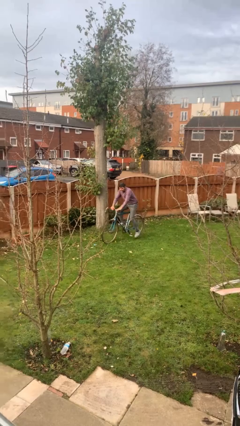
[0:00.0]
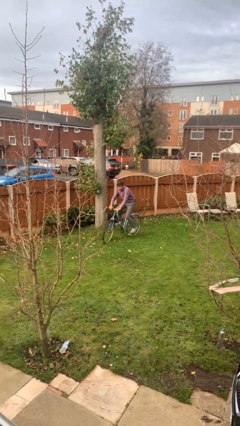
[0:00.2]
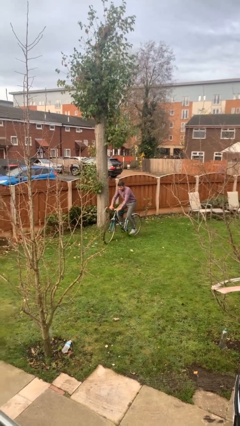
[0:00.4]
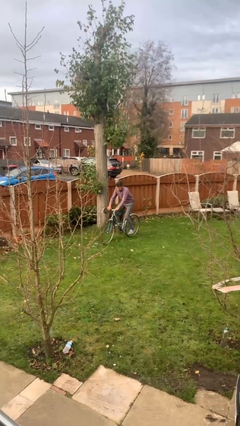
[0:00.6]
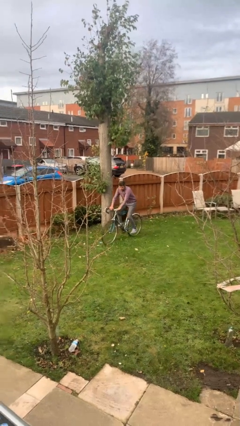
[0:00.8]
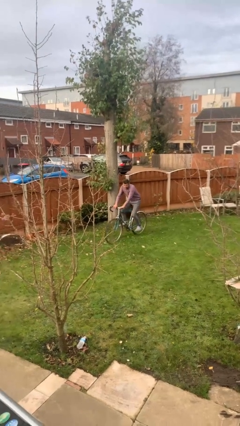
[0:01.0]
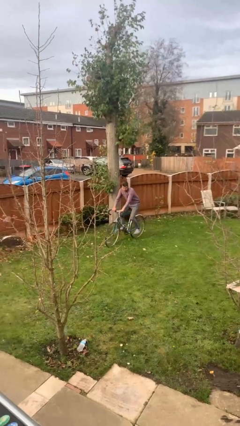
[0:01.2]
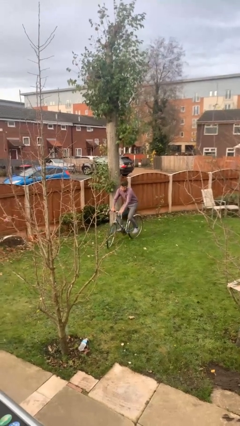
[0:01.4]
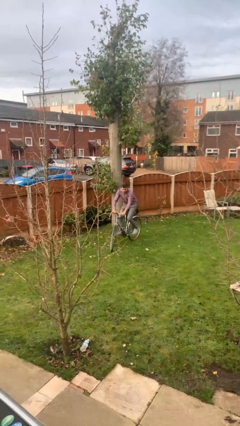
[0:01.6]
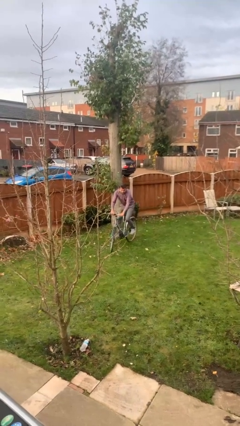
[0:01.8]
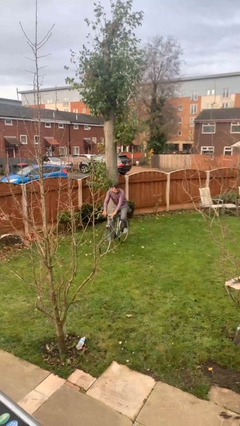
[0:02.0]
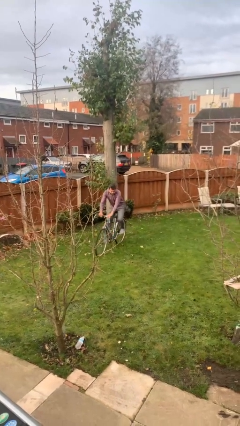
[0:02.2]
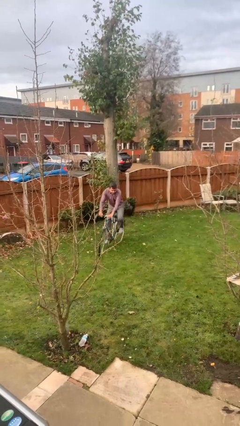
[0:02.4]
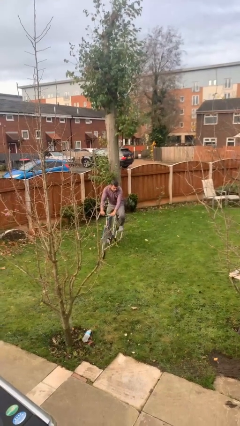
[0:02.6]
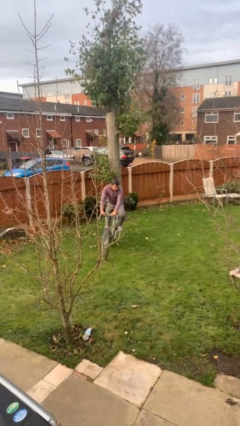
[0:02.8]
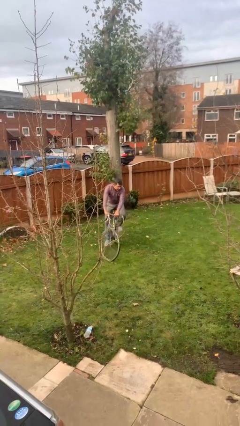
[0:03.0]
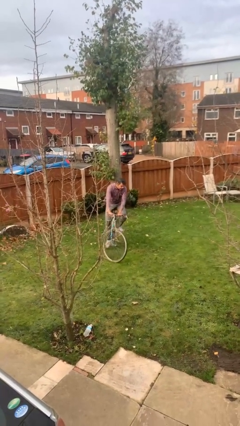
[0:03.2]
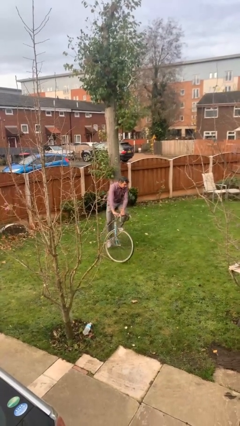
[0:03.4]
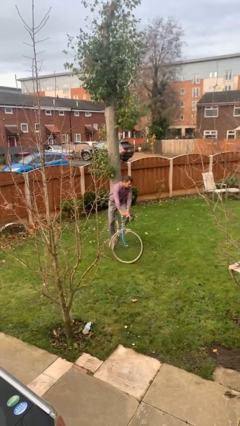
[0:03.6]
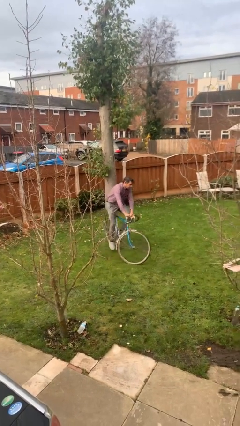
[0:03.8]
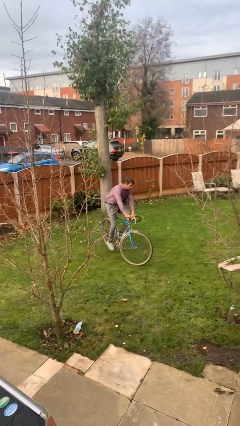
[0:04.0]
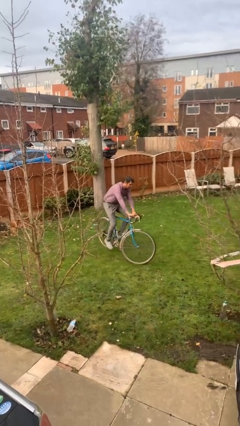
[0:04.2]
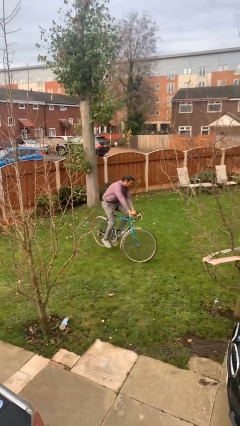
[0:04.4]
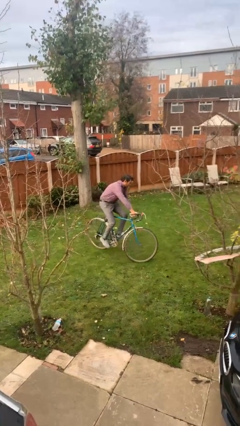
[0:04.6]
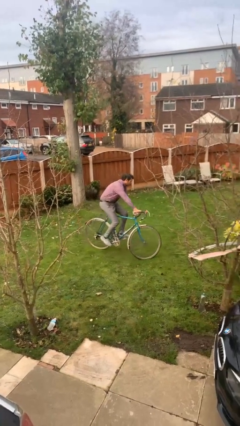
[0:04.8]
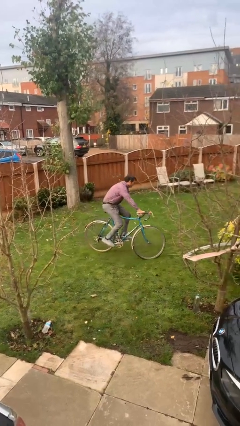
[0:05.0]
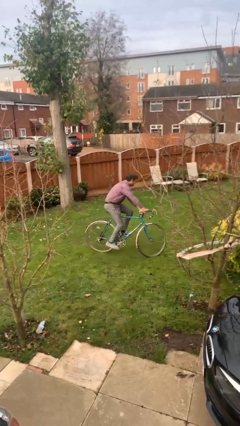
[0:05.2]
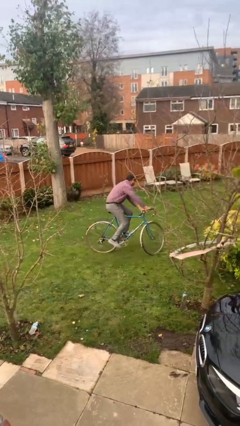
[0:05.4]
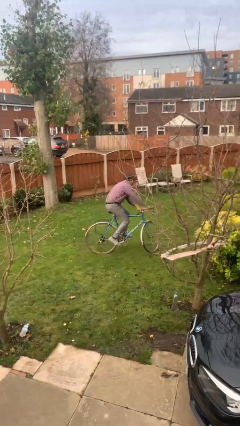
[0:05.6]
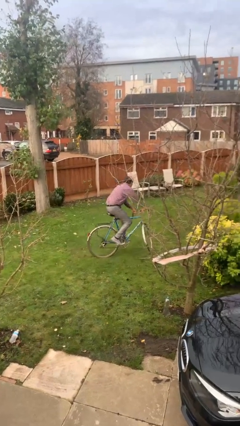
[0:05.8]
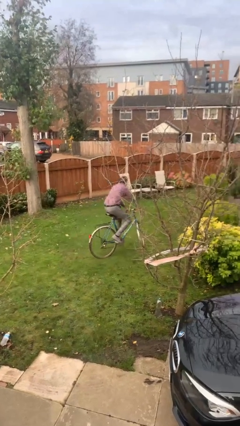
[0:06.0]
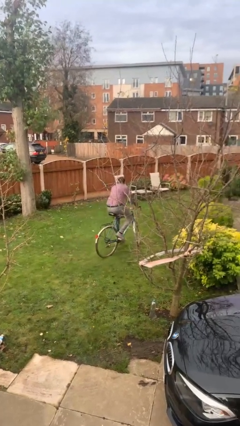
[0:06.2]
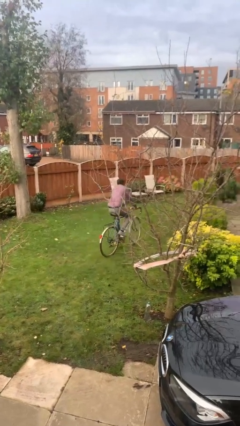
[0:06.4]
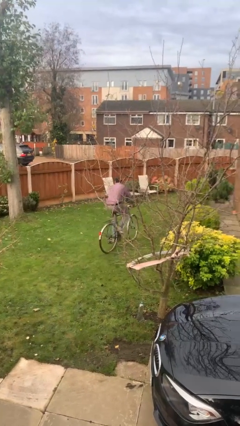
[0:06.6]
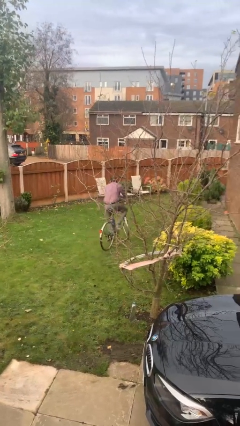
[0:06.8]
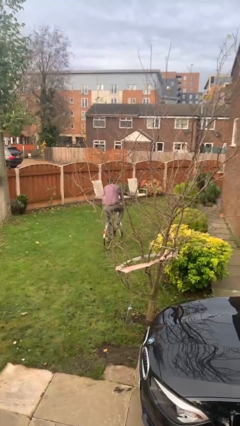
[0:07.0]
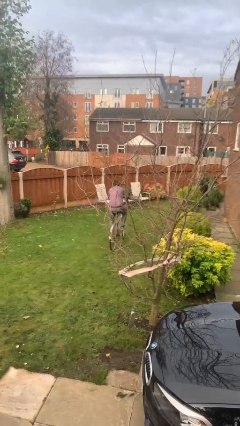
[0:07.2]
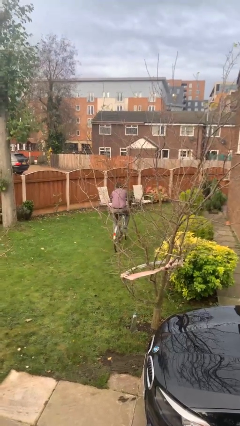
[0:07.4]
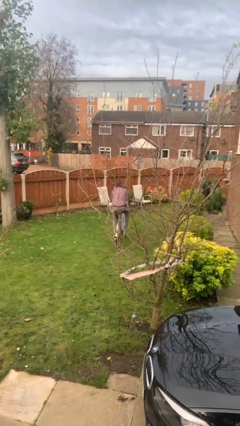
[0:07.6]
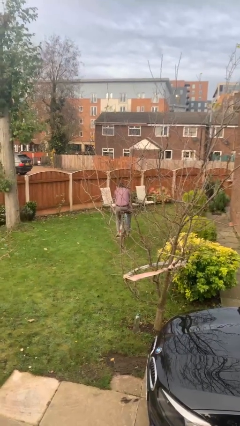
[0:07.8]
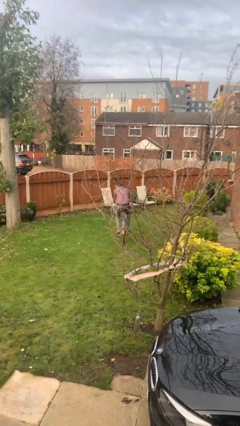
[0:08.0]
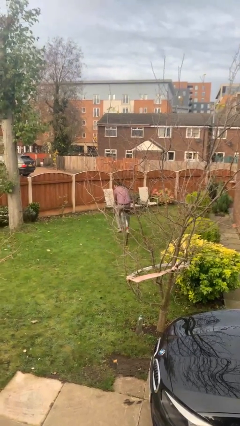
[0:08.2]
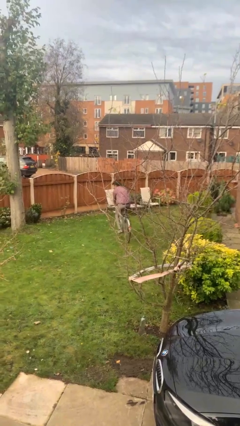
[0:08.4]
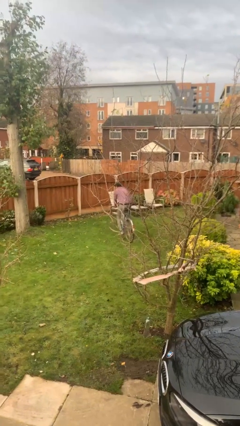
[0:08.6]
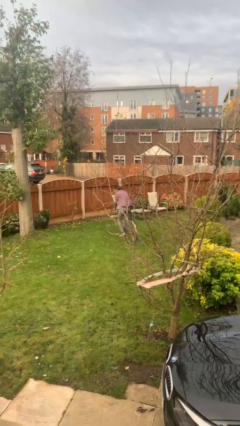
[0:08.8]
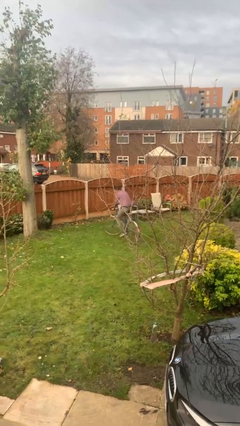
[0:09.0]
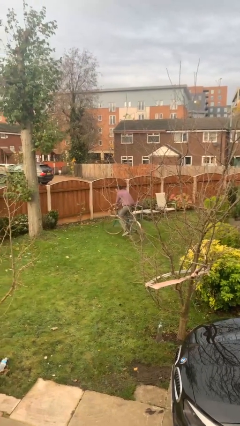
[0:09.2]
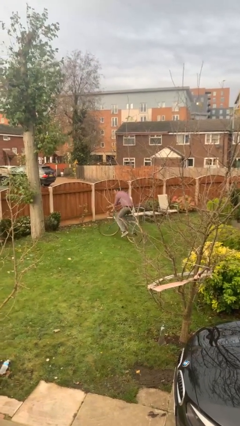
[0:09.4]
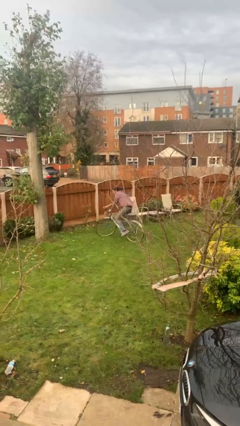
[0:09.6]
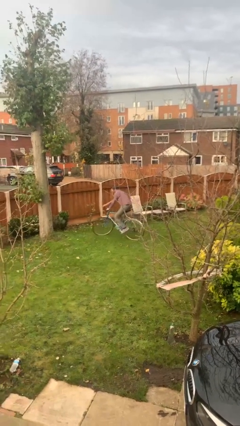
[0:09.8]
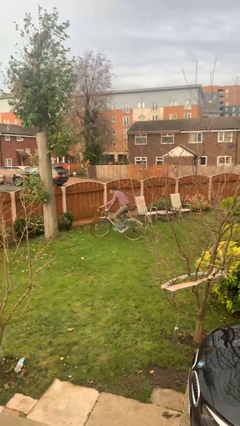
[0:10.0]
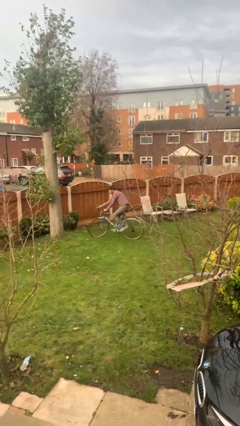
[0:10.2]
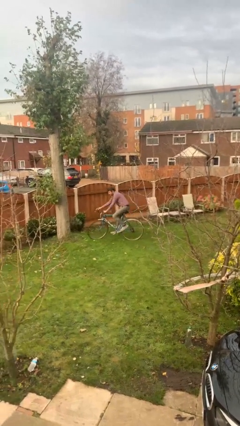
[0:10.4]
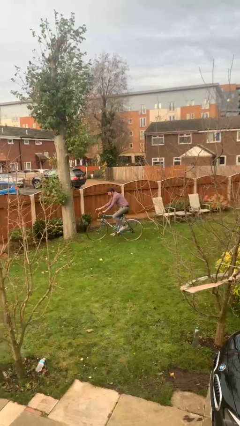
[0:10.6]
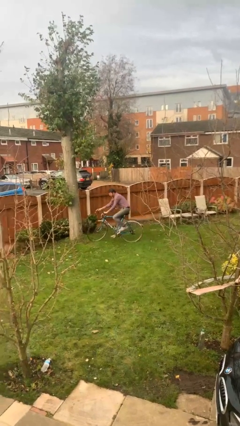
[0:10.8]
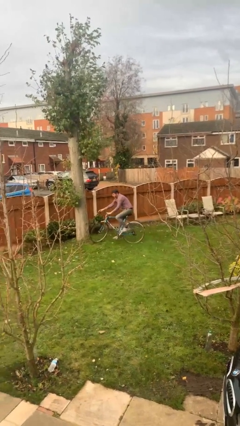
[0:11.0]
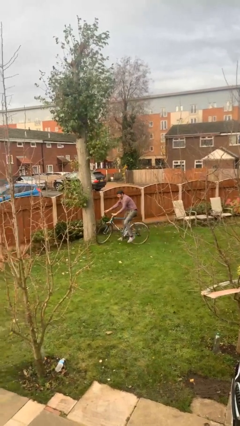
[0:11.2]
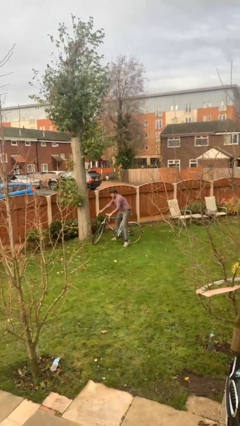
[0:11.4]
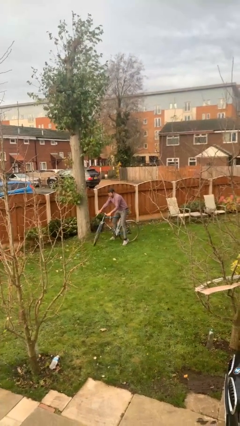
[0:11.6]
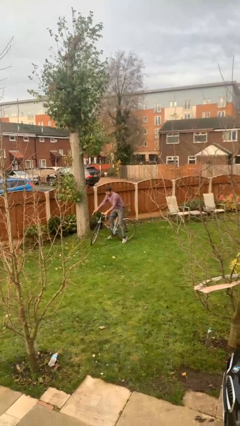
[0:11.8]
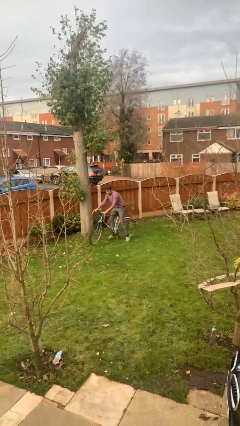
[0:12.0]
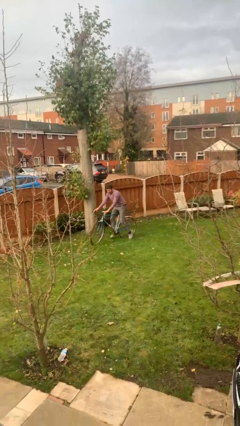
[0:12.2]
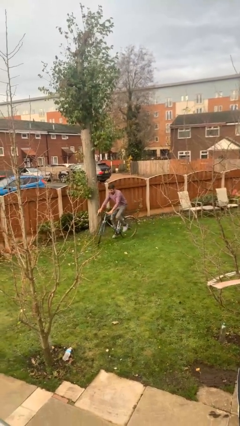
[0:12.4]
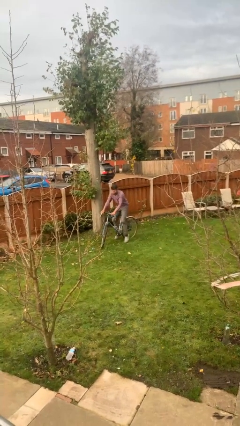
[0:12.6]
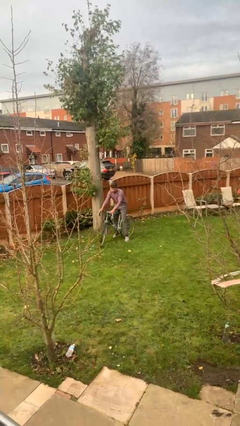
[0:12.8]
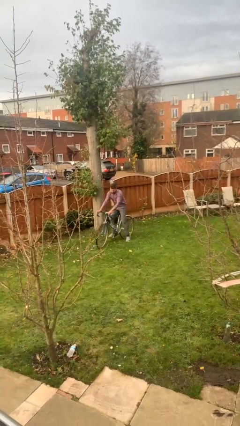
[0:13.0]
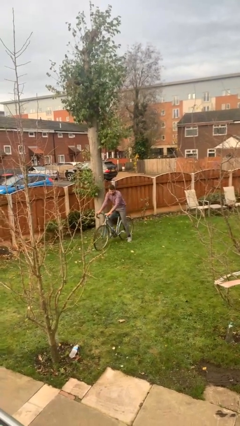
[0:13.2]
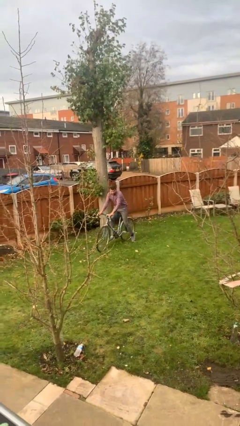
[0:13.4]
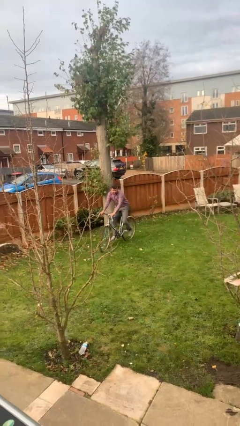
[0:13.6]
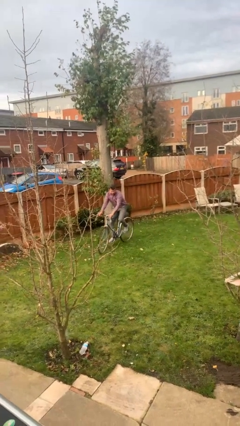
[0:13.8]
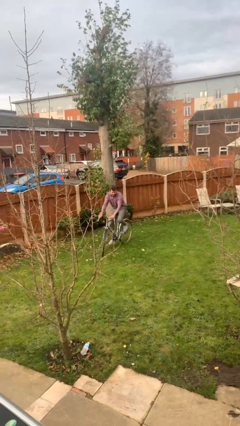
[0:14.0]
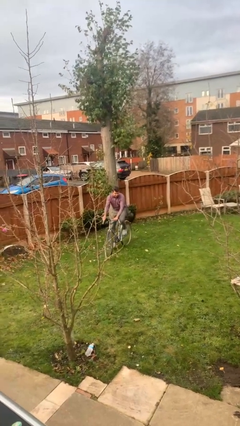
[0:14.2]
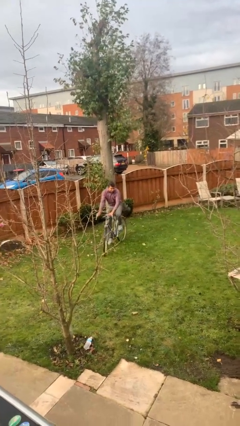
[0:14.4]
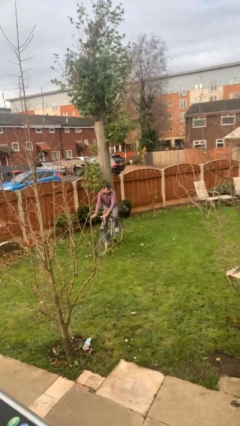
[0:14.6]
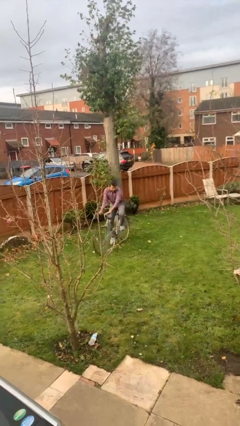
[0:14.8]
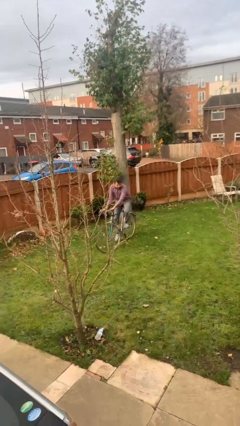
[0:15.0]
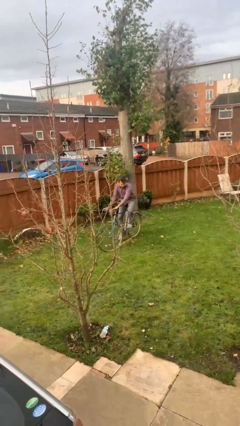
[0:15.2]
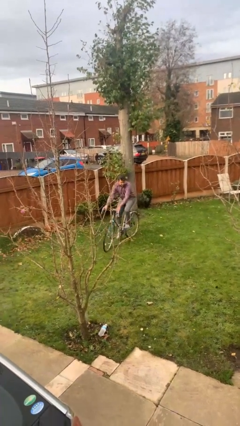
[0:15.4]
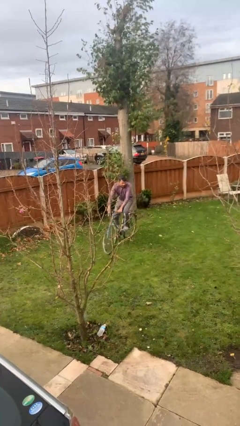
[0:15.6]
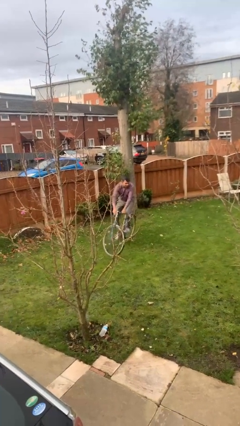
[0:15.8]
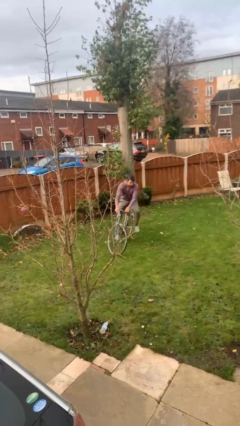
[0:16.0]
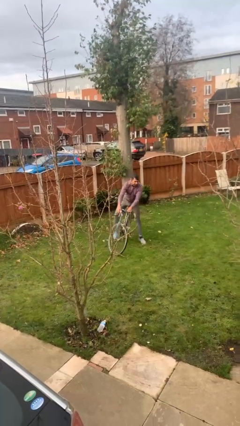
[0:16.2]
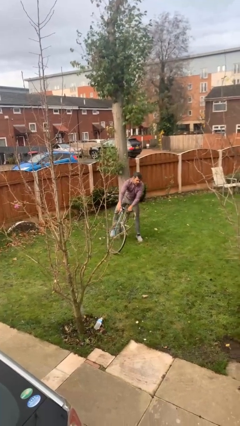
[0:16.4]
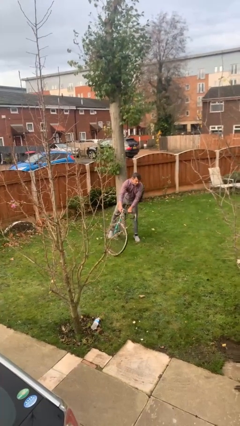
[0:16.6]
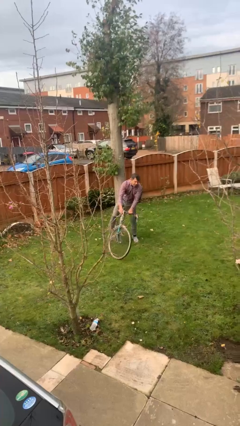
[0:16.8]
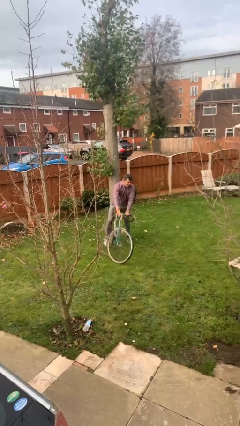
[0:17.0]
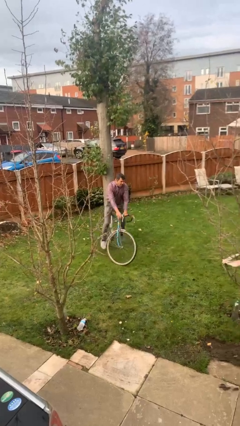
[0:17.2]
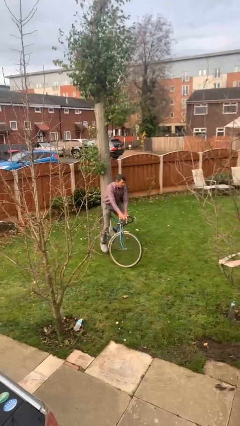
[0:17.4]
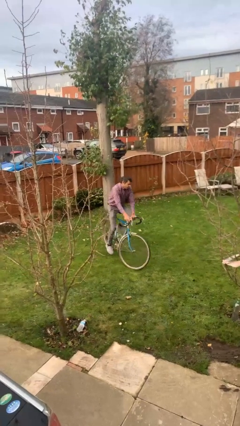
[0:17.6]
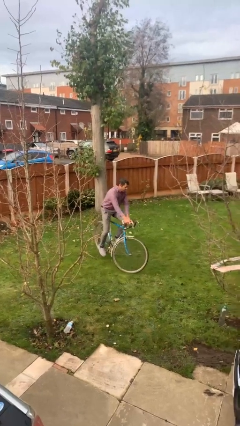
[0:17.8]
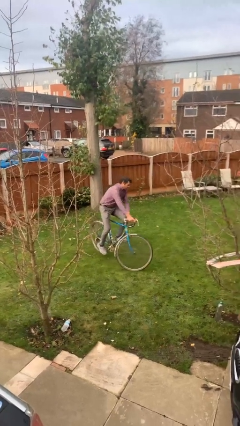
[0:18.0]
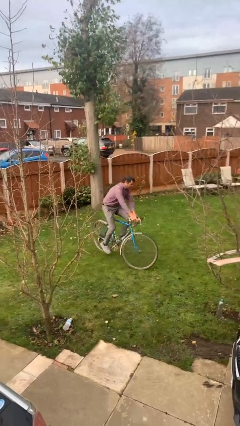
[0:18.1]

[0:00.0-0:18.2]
person rides bicycle
